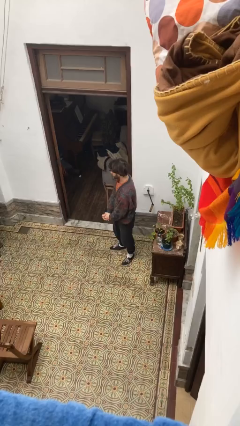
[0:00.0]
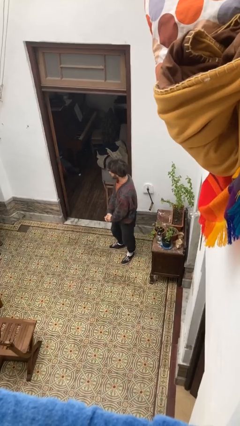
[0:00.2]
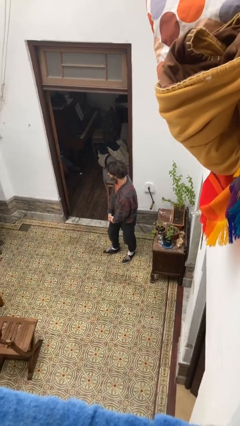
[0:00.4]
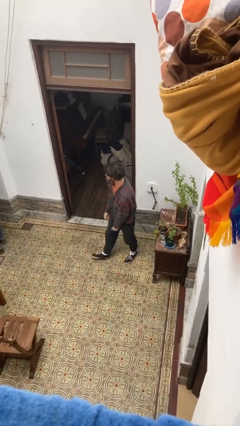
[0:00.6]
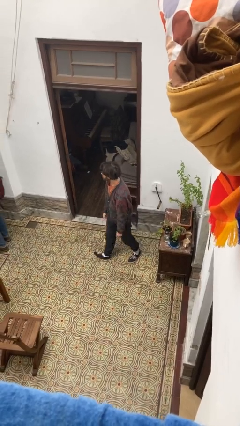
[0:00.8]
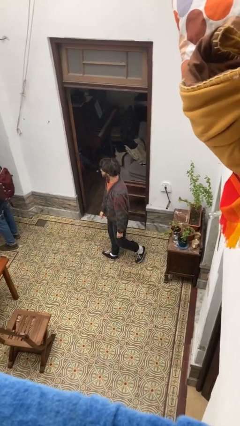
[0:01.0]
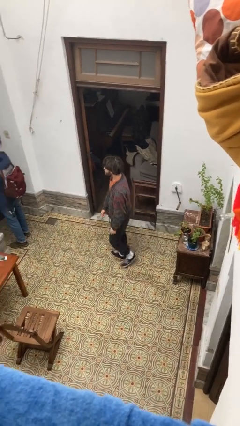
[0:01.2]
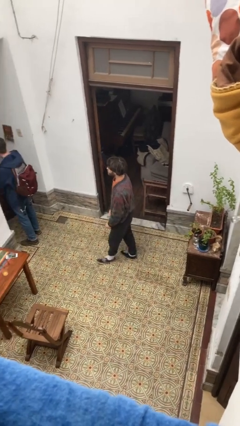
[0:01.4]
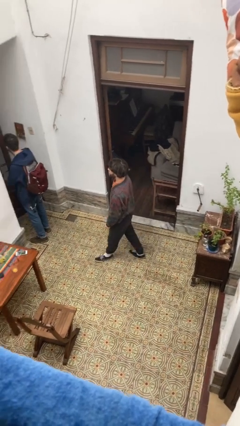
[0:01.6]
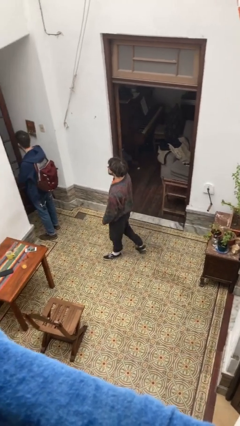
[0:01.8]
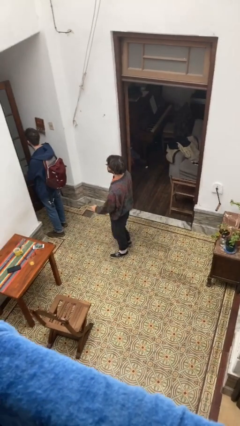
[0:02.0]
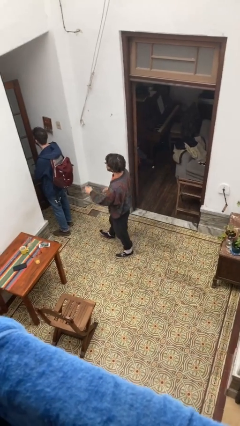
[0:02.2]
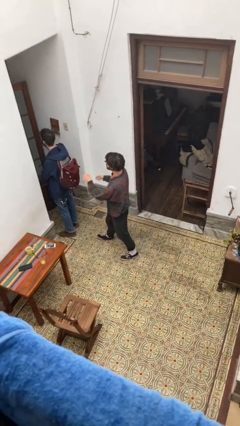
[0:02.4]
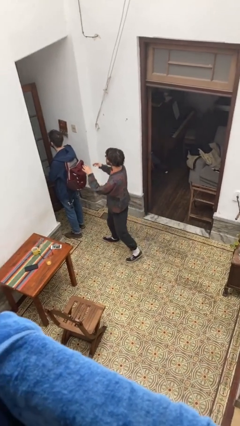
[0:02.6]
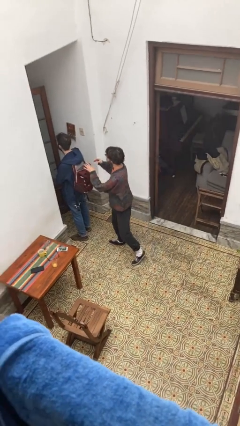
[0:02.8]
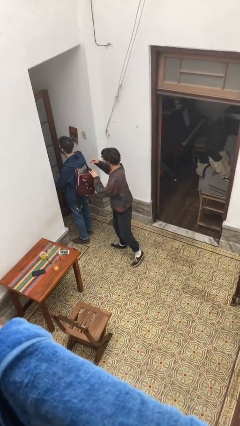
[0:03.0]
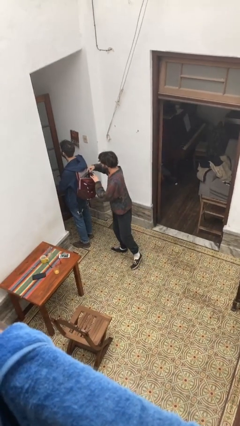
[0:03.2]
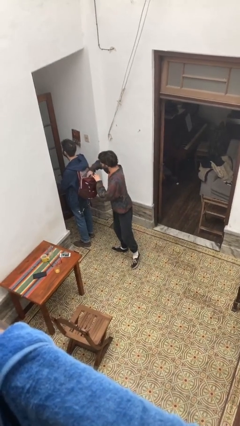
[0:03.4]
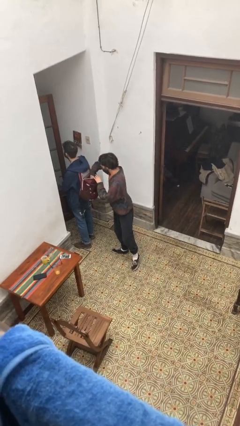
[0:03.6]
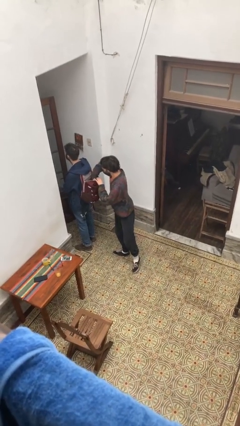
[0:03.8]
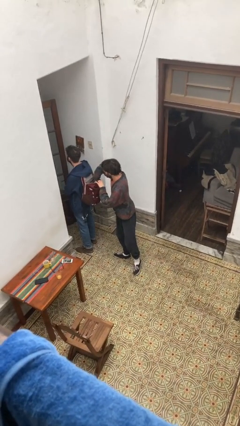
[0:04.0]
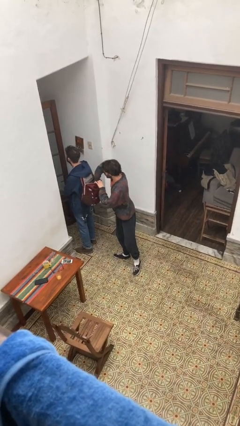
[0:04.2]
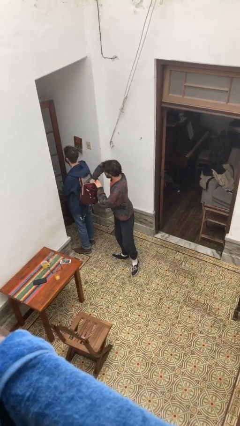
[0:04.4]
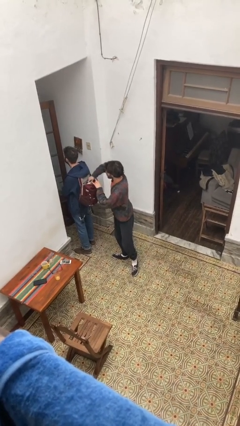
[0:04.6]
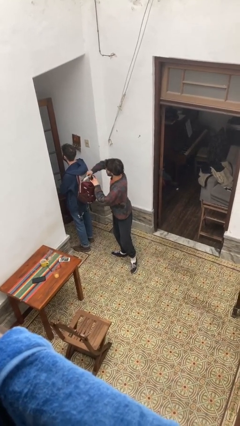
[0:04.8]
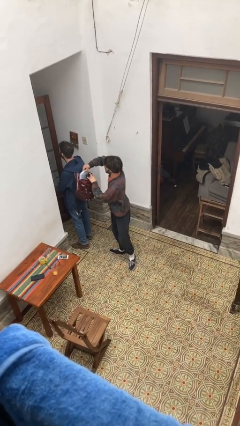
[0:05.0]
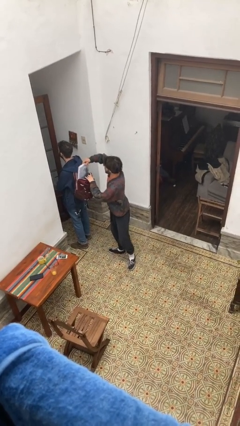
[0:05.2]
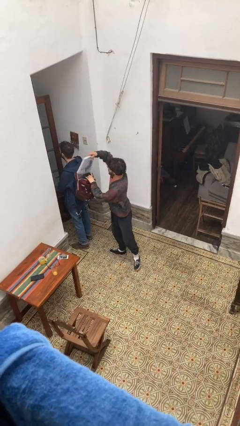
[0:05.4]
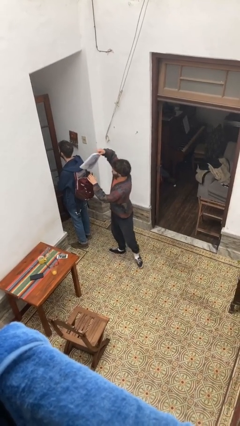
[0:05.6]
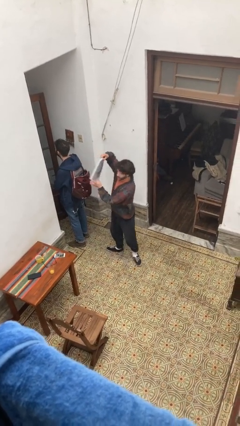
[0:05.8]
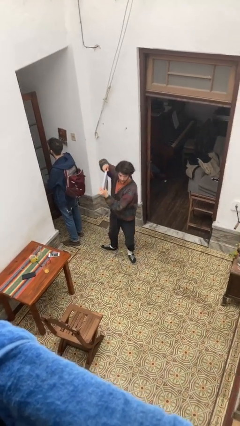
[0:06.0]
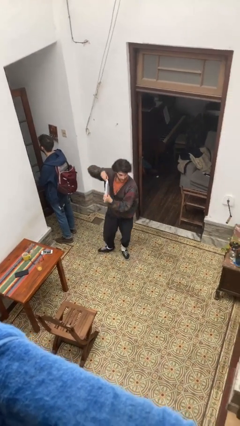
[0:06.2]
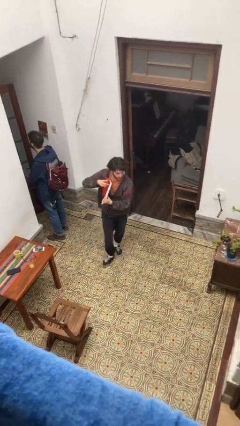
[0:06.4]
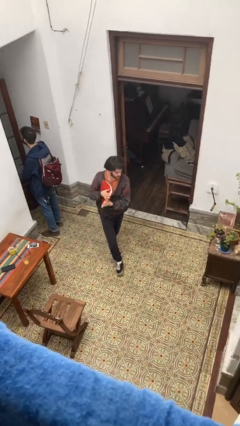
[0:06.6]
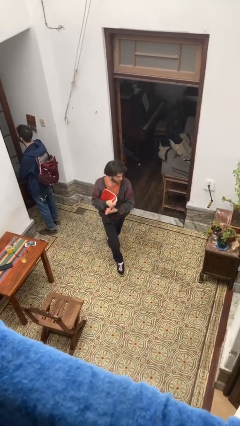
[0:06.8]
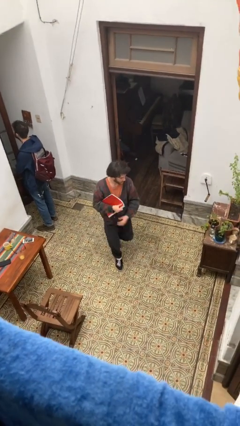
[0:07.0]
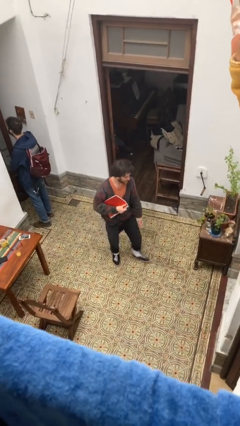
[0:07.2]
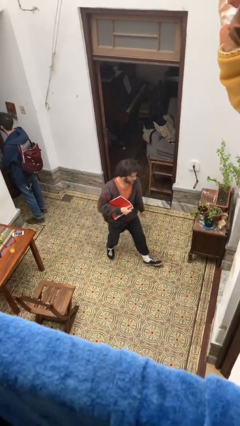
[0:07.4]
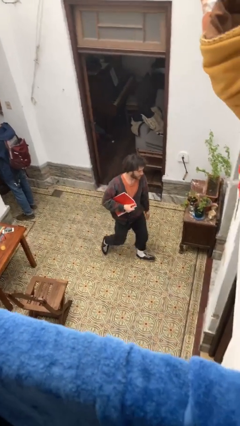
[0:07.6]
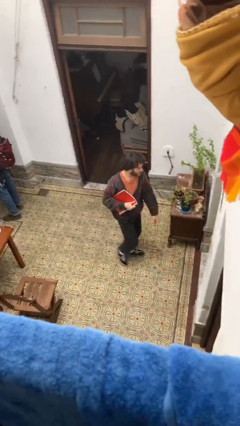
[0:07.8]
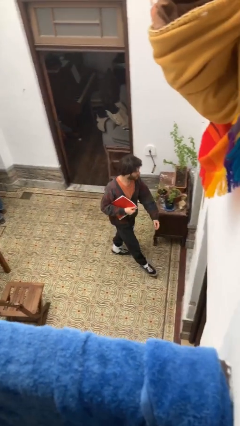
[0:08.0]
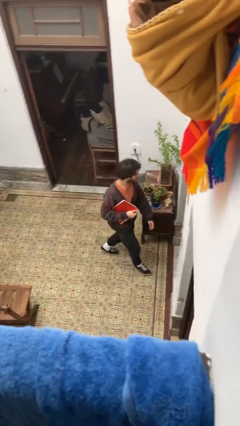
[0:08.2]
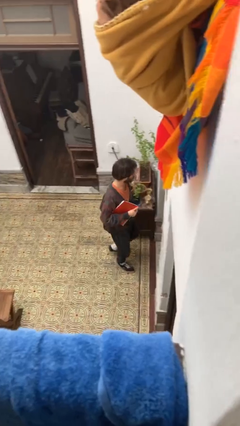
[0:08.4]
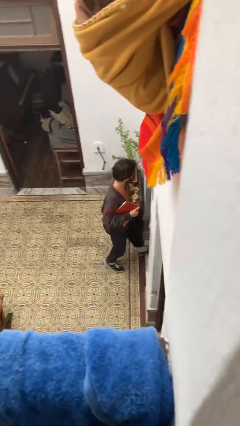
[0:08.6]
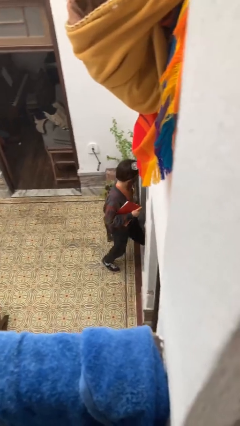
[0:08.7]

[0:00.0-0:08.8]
person steals object from person

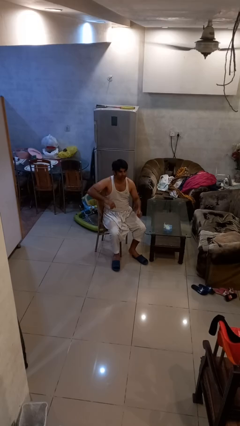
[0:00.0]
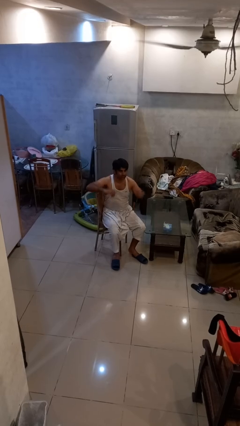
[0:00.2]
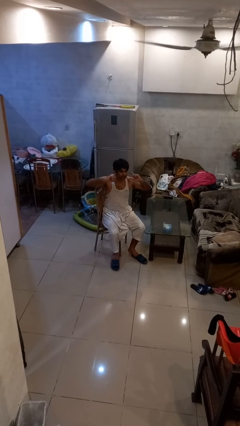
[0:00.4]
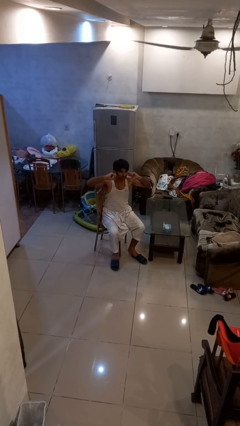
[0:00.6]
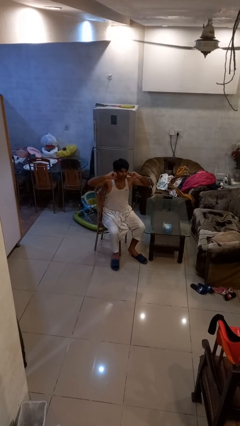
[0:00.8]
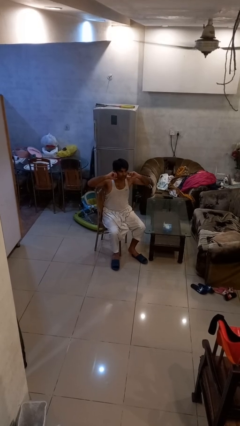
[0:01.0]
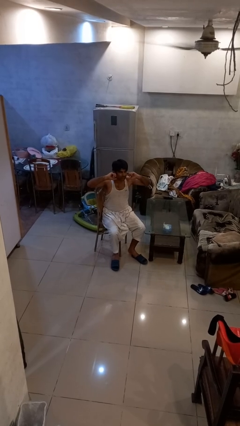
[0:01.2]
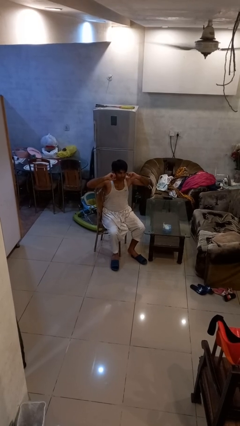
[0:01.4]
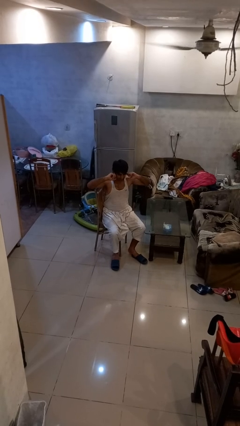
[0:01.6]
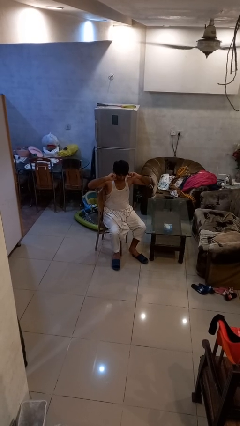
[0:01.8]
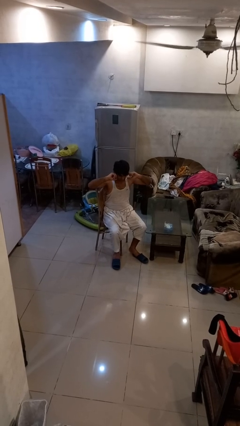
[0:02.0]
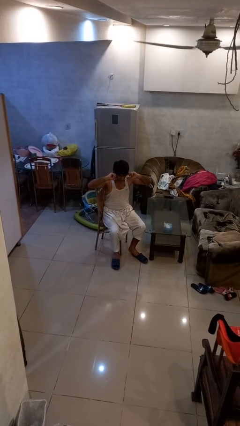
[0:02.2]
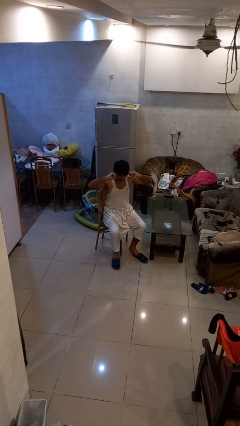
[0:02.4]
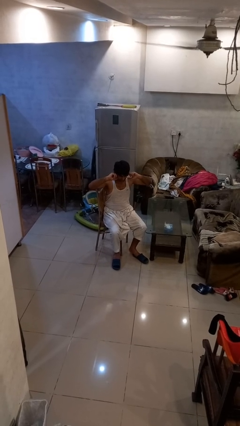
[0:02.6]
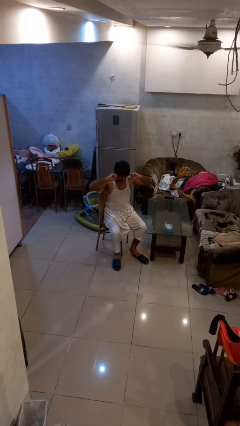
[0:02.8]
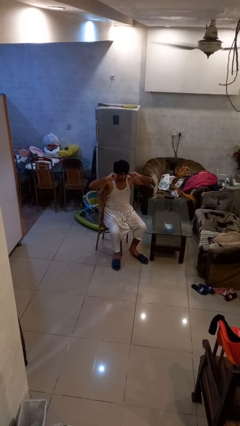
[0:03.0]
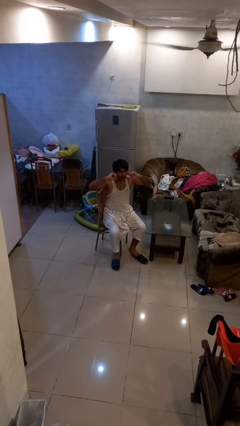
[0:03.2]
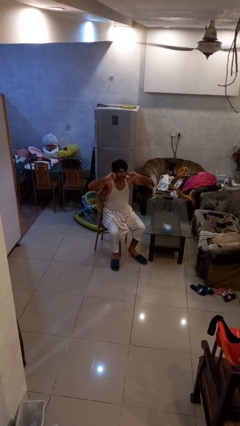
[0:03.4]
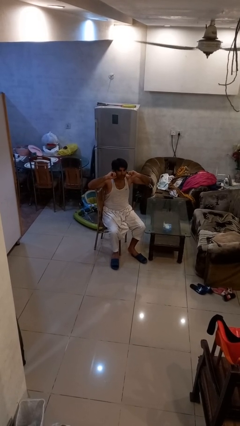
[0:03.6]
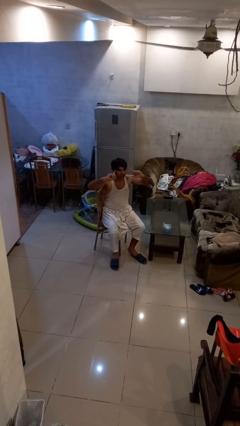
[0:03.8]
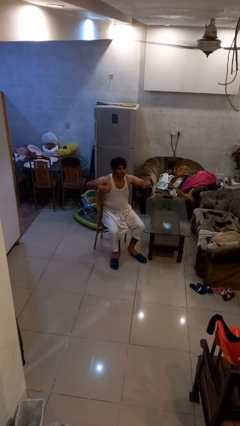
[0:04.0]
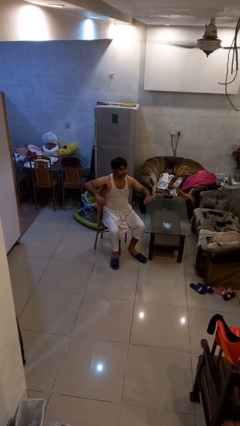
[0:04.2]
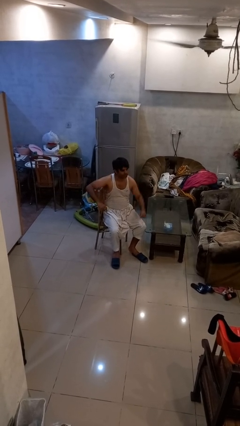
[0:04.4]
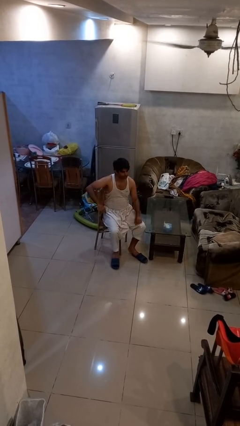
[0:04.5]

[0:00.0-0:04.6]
person puts fingers in ear

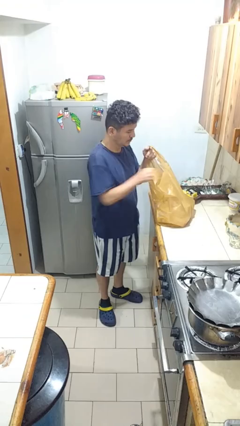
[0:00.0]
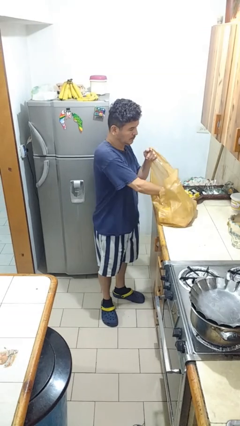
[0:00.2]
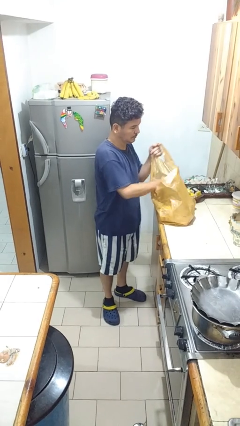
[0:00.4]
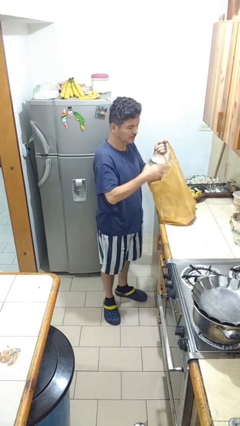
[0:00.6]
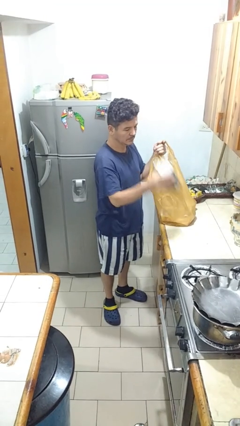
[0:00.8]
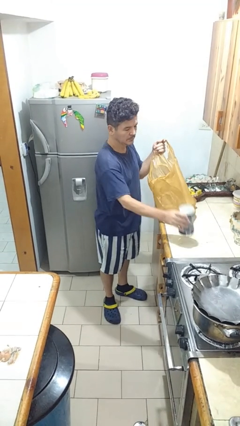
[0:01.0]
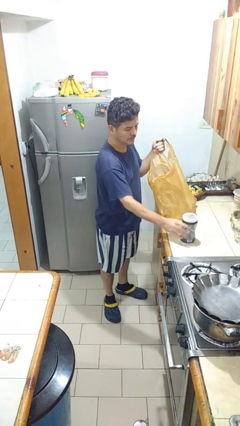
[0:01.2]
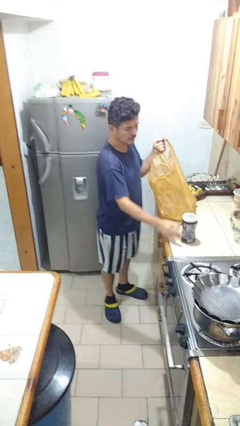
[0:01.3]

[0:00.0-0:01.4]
person takes object from bag

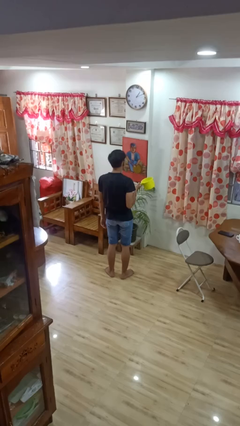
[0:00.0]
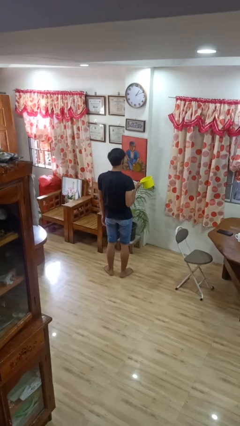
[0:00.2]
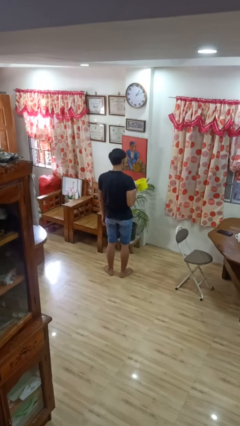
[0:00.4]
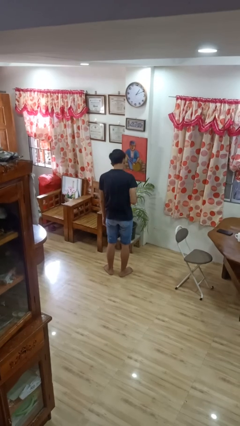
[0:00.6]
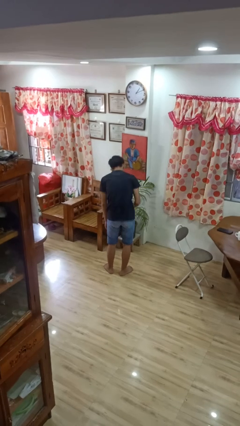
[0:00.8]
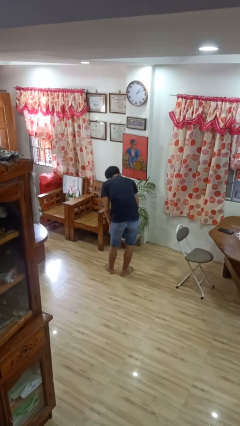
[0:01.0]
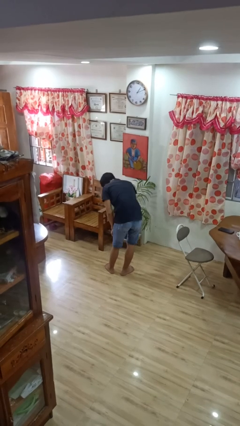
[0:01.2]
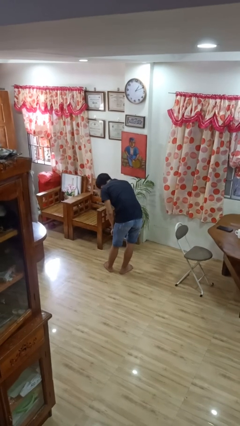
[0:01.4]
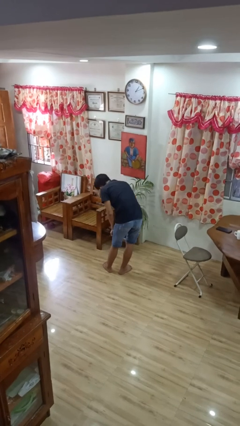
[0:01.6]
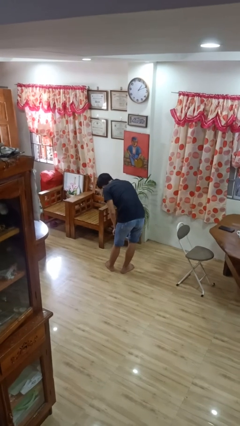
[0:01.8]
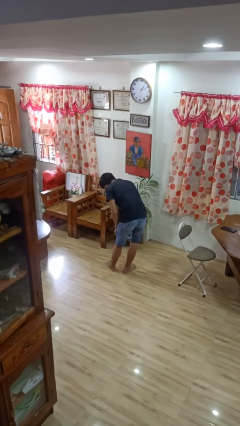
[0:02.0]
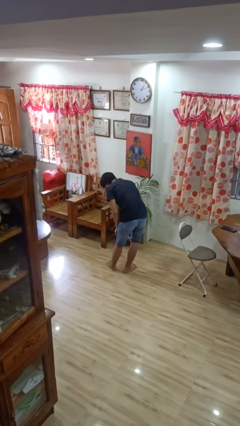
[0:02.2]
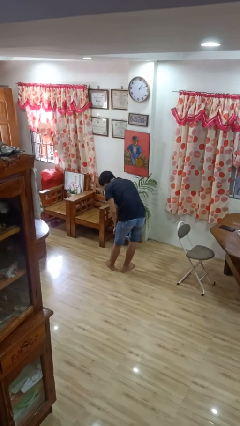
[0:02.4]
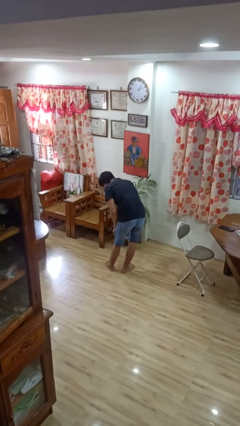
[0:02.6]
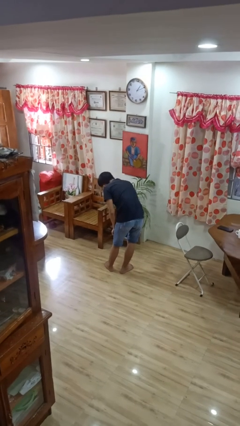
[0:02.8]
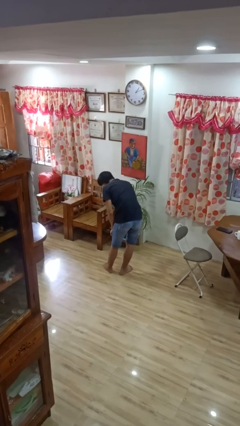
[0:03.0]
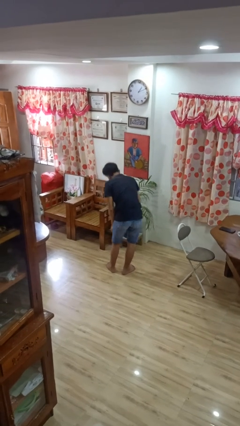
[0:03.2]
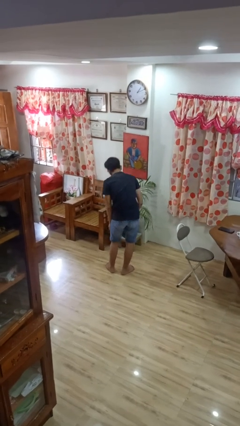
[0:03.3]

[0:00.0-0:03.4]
person waters houseplant
